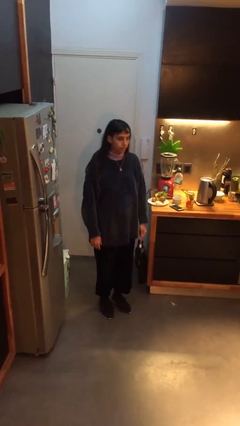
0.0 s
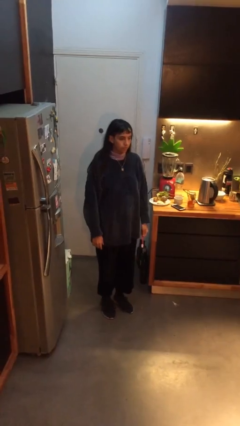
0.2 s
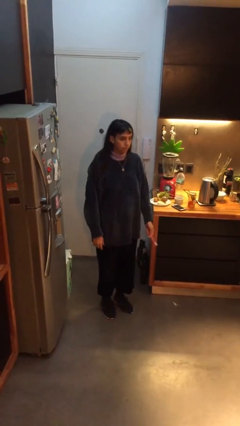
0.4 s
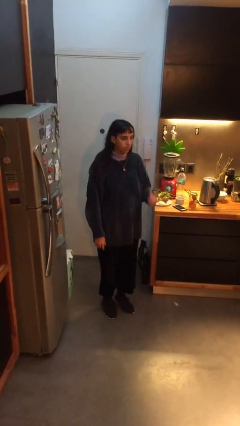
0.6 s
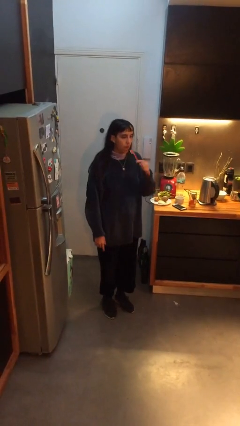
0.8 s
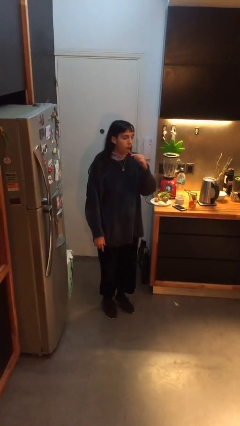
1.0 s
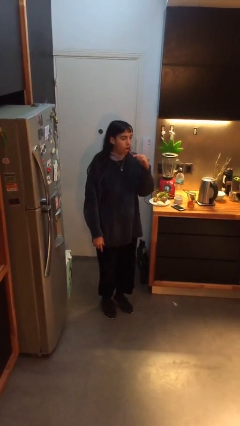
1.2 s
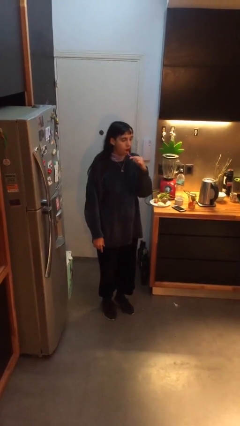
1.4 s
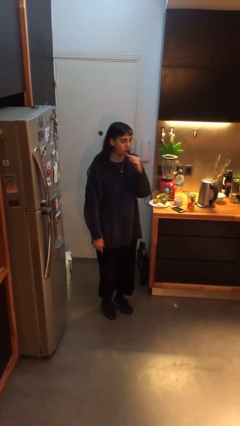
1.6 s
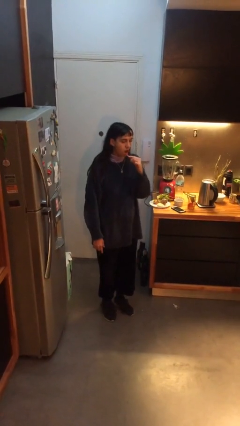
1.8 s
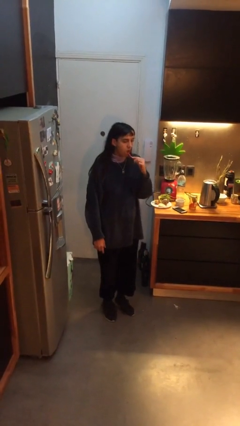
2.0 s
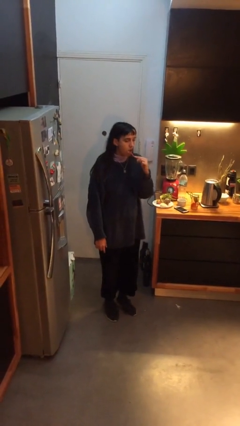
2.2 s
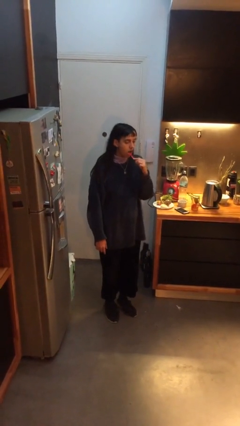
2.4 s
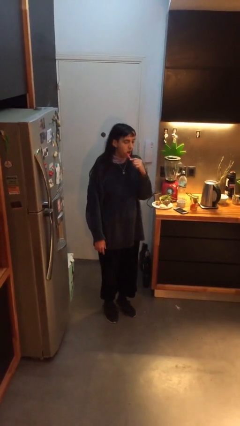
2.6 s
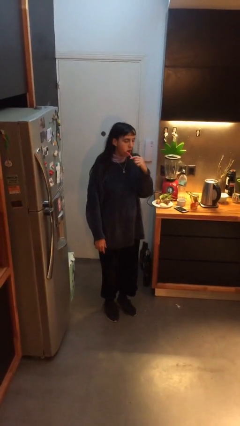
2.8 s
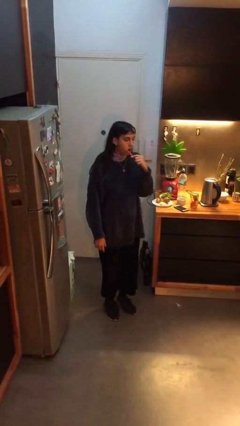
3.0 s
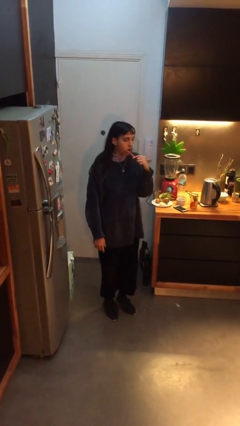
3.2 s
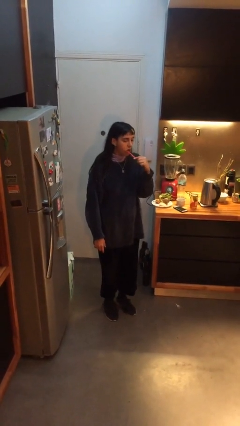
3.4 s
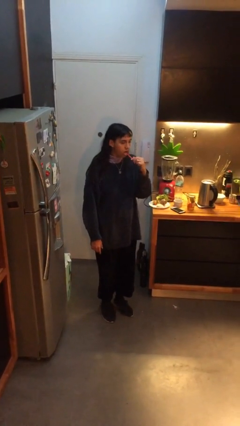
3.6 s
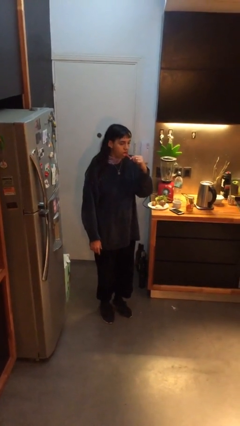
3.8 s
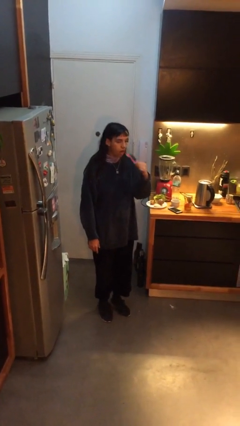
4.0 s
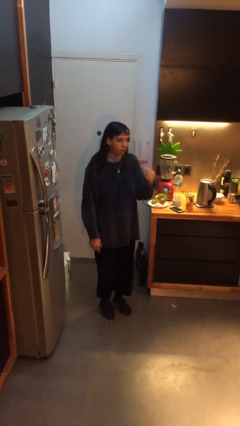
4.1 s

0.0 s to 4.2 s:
person brushes teeth

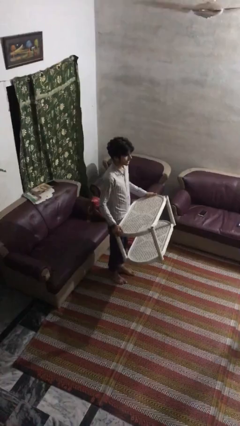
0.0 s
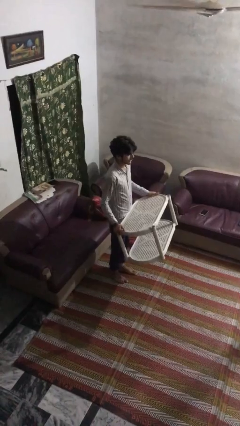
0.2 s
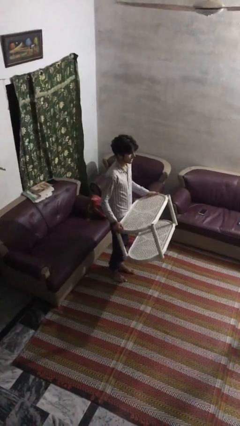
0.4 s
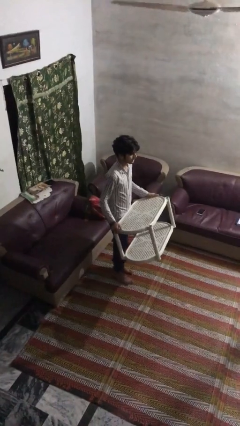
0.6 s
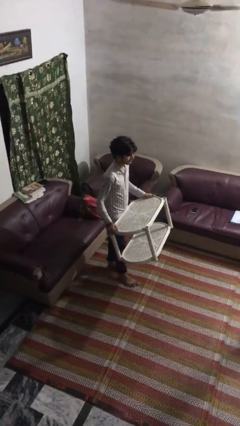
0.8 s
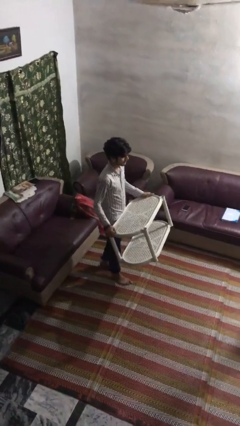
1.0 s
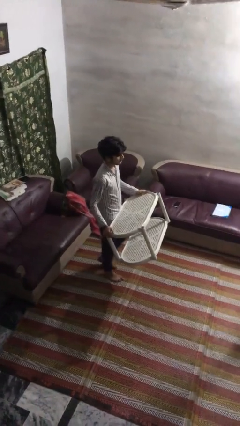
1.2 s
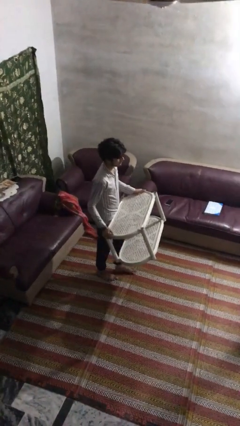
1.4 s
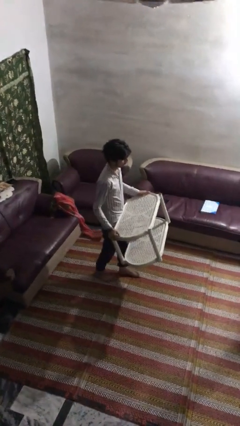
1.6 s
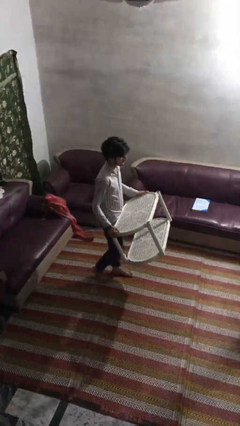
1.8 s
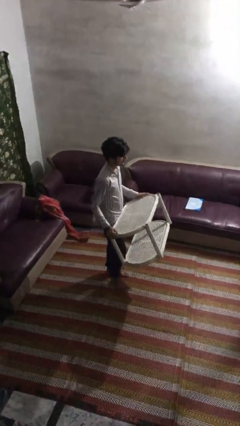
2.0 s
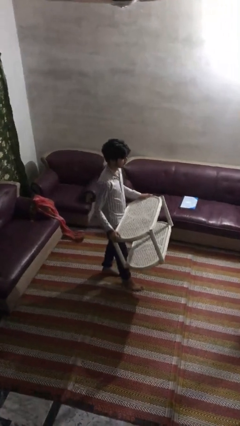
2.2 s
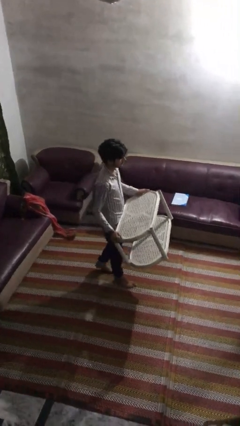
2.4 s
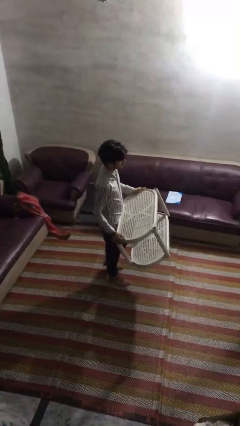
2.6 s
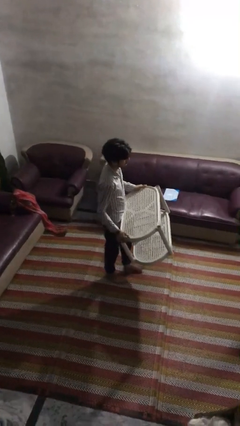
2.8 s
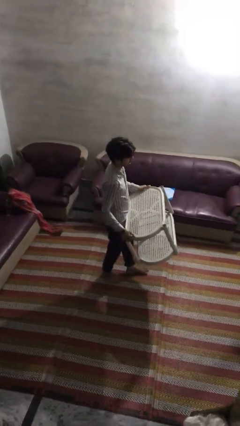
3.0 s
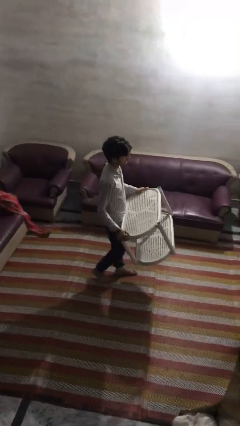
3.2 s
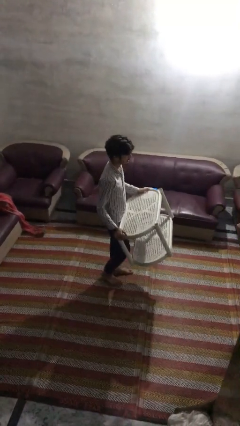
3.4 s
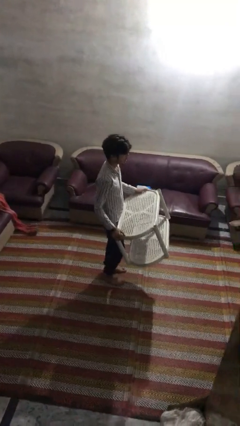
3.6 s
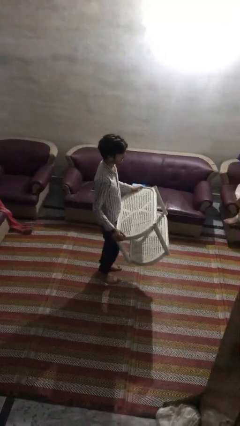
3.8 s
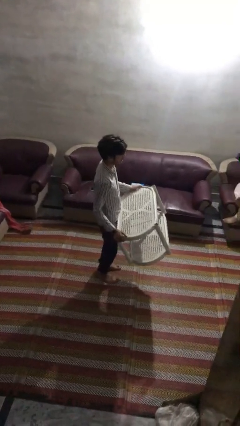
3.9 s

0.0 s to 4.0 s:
person carries furniture

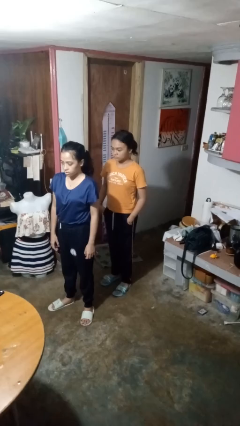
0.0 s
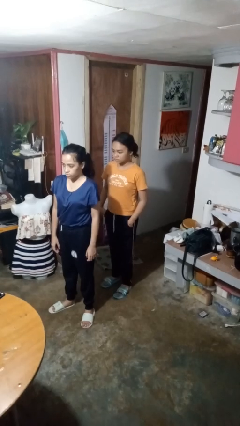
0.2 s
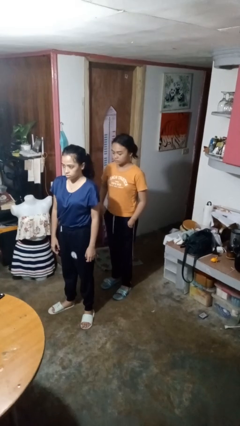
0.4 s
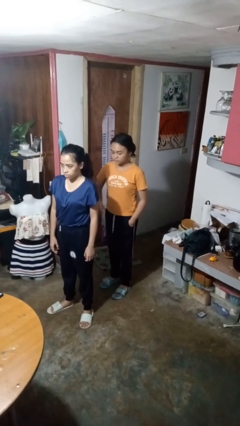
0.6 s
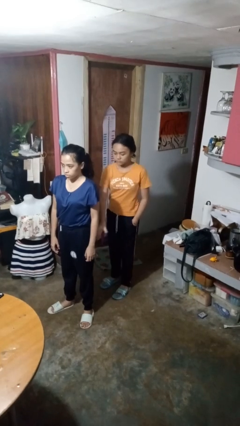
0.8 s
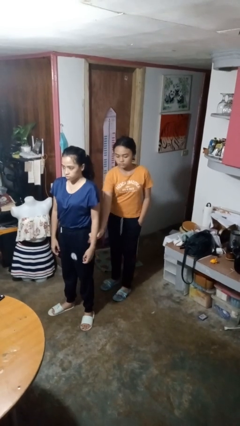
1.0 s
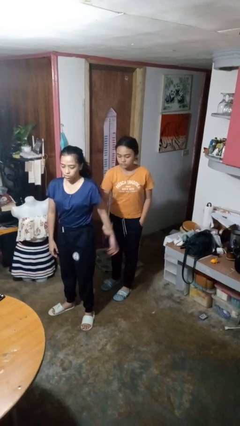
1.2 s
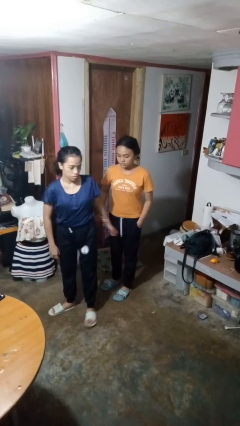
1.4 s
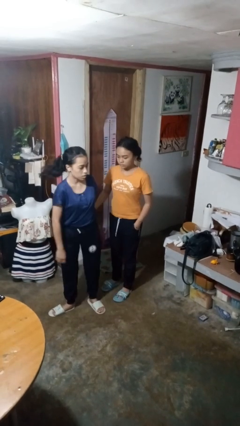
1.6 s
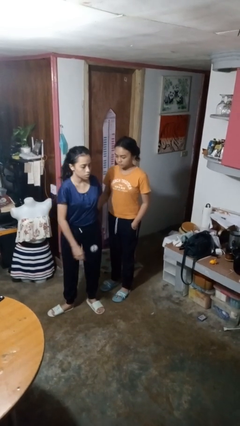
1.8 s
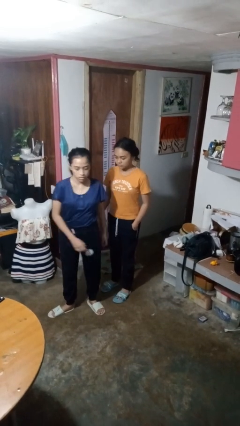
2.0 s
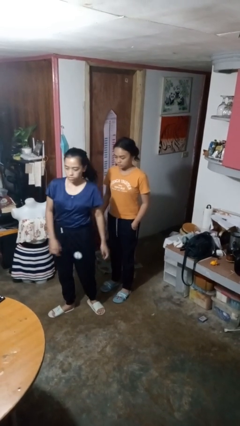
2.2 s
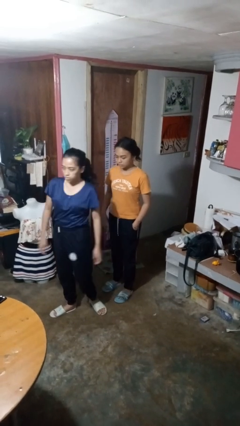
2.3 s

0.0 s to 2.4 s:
person grabs person by forearm

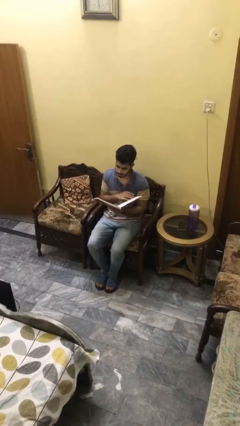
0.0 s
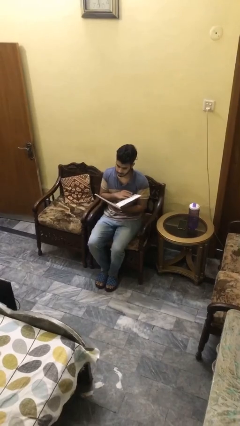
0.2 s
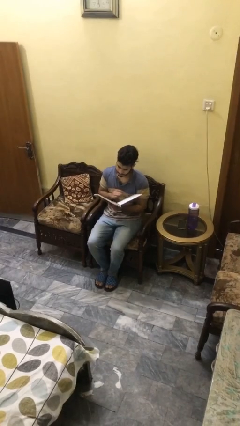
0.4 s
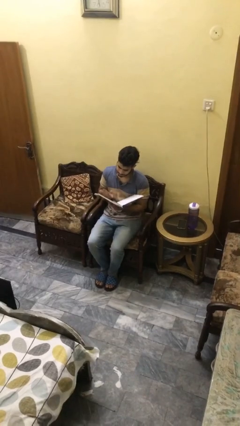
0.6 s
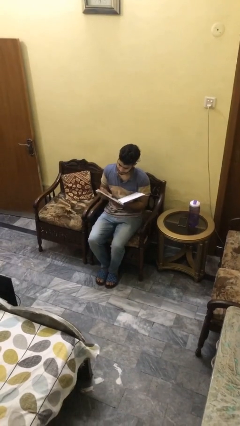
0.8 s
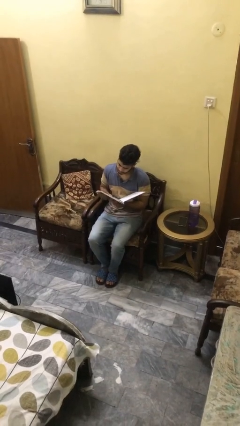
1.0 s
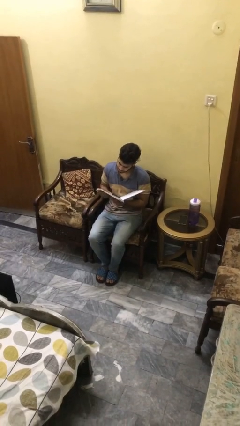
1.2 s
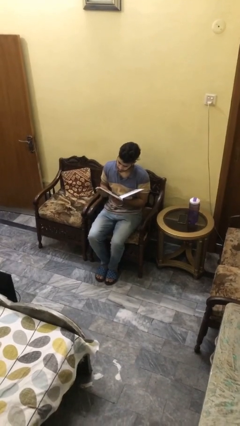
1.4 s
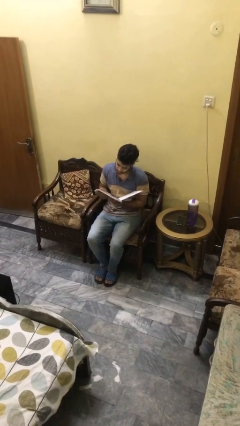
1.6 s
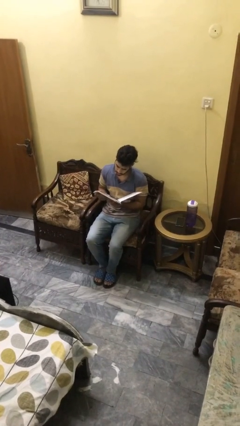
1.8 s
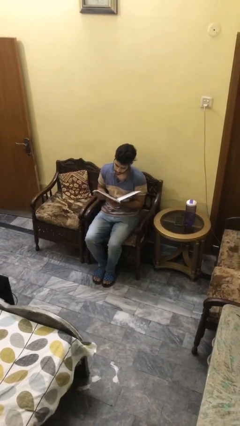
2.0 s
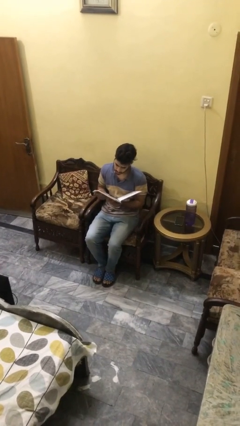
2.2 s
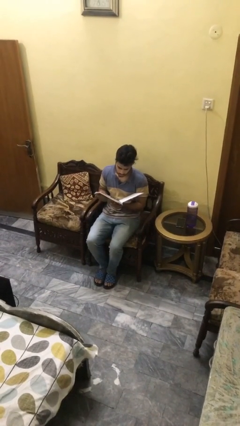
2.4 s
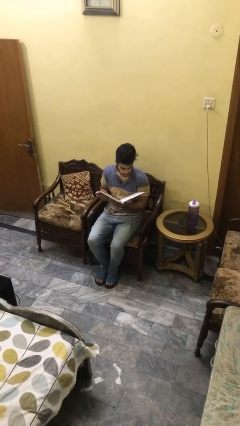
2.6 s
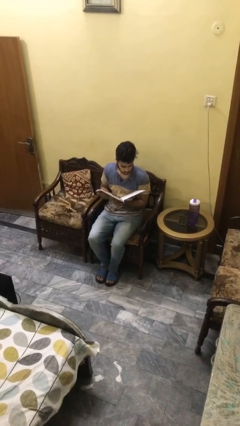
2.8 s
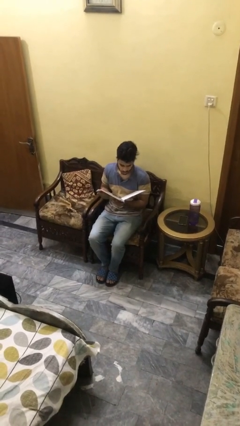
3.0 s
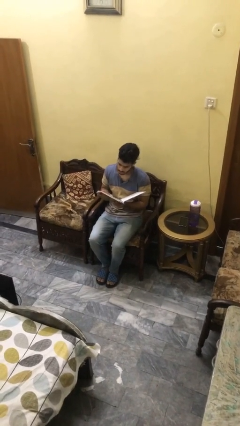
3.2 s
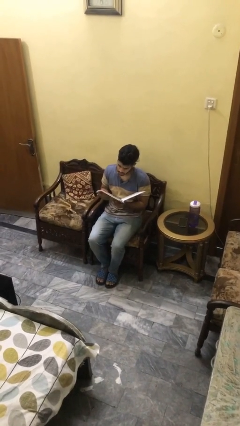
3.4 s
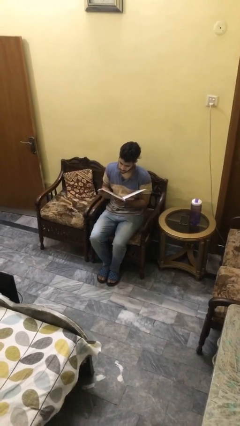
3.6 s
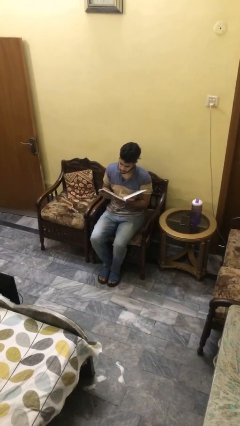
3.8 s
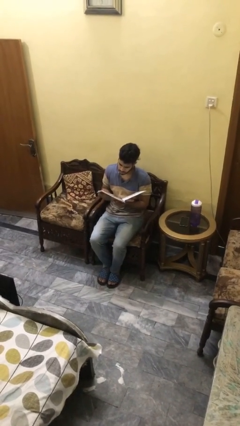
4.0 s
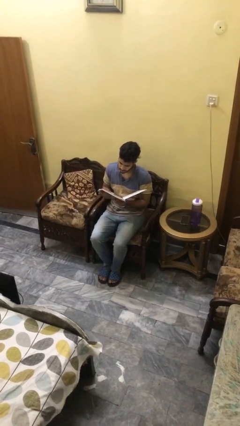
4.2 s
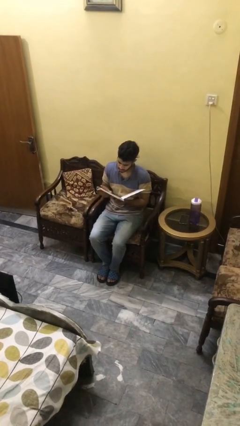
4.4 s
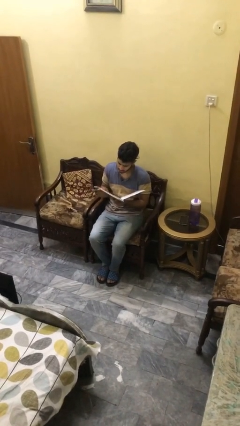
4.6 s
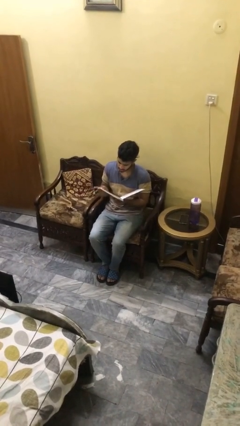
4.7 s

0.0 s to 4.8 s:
person reads document

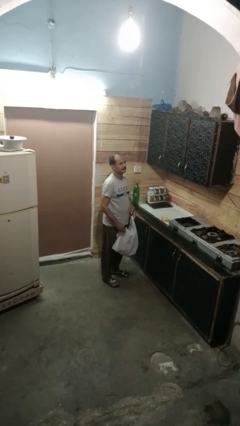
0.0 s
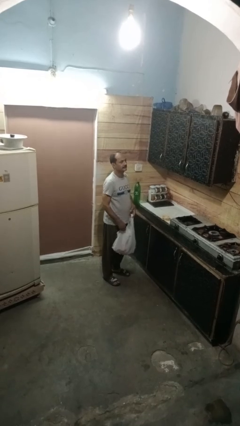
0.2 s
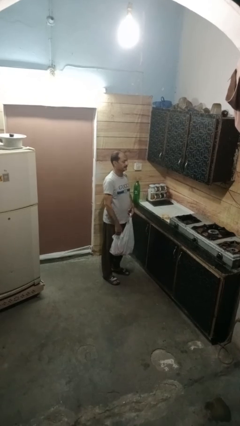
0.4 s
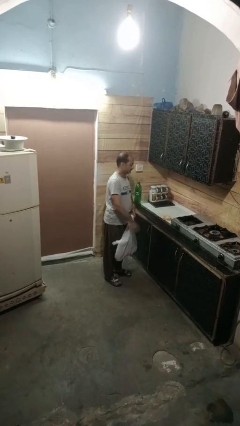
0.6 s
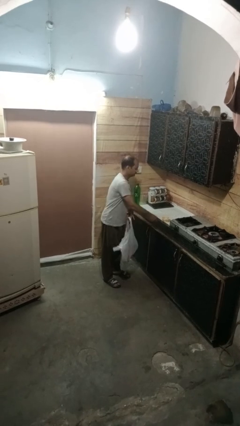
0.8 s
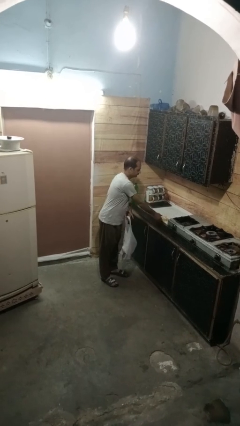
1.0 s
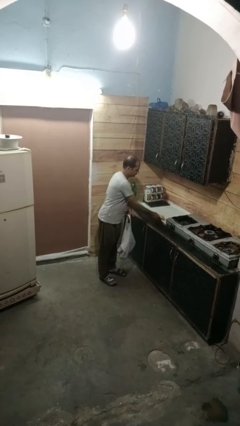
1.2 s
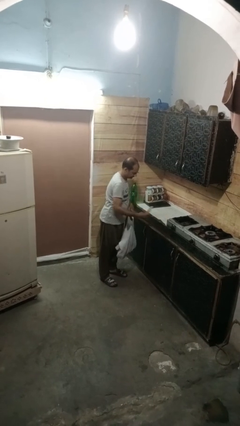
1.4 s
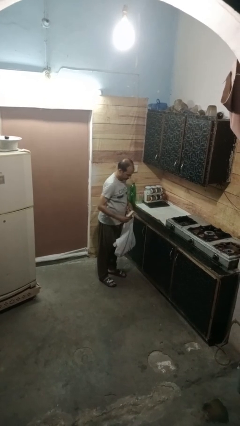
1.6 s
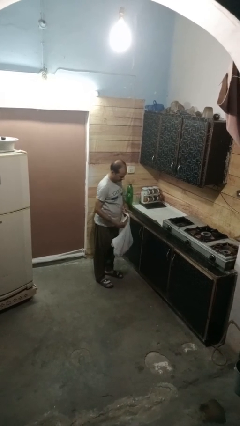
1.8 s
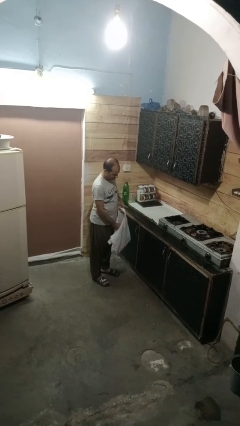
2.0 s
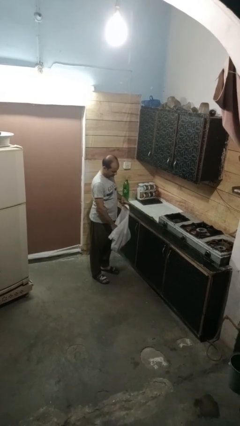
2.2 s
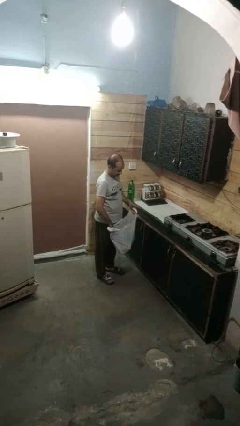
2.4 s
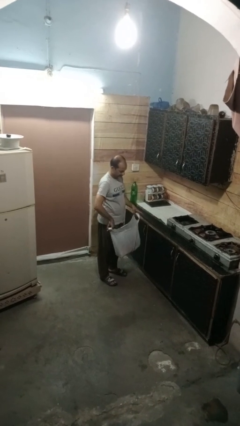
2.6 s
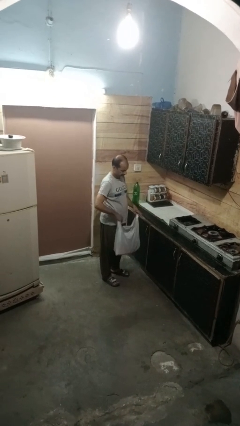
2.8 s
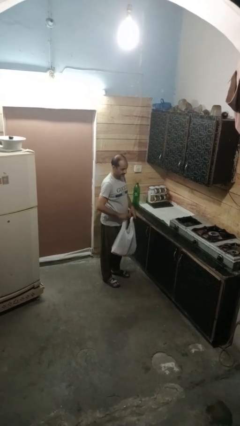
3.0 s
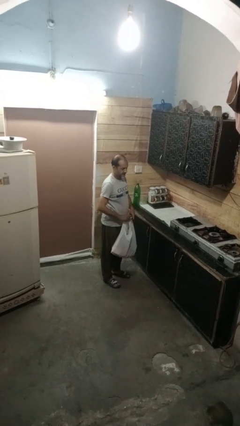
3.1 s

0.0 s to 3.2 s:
person puts object into bag
